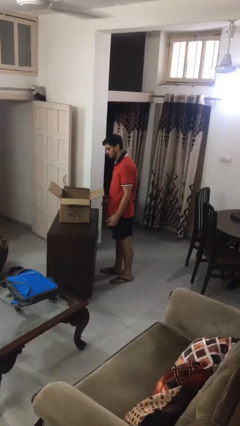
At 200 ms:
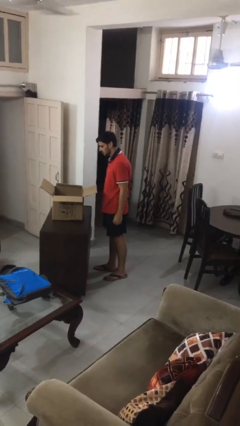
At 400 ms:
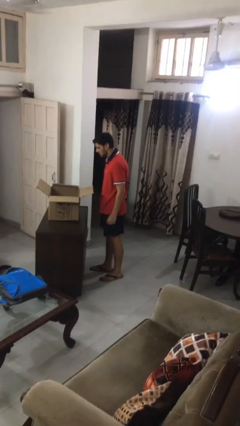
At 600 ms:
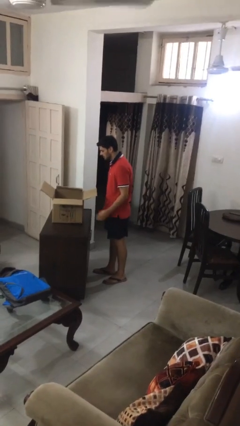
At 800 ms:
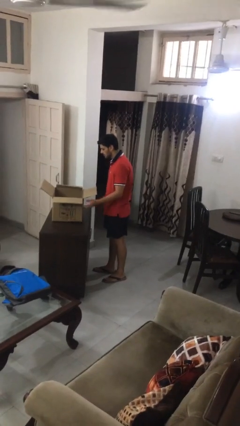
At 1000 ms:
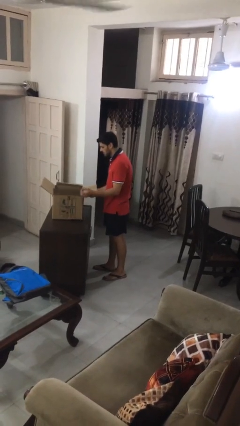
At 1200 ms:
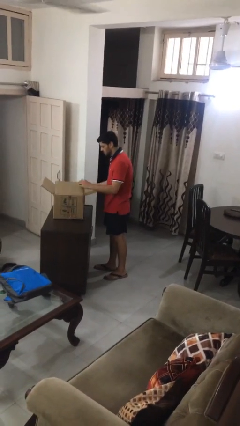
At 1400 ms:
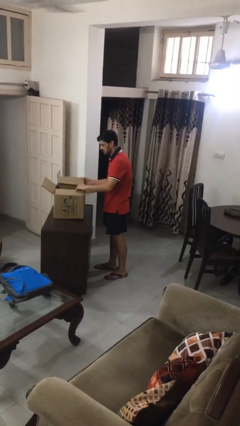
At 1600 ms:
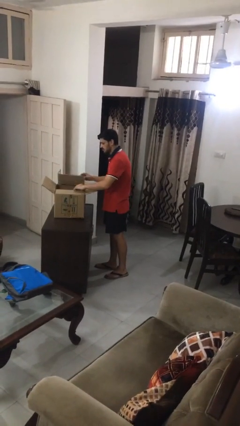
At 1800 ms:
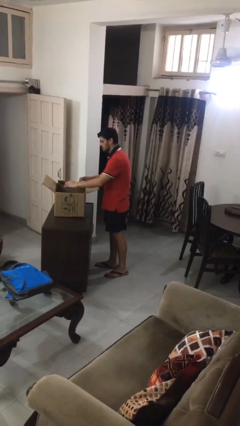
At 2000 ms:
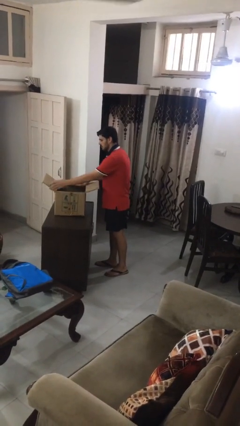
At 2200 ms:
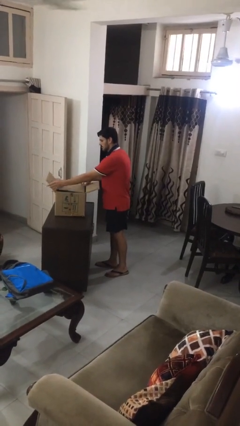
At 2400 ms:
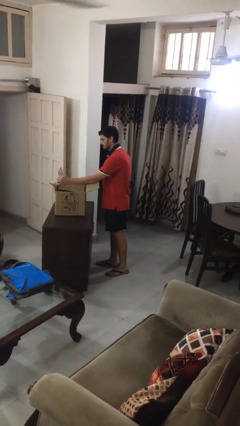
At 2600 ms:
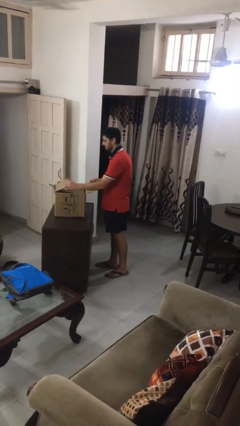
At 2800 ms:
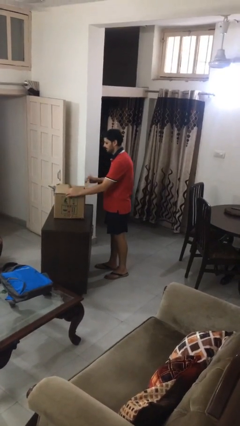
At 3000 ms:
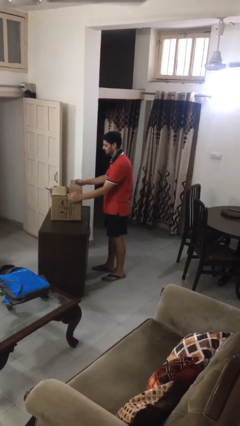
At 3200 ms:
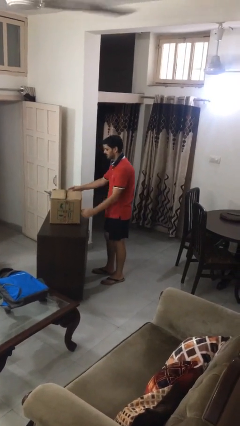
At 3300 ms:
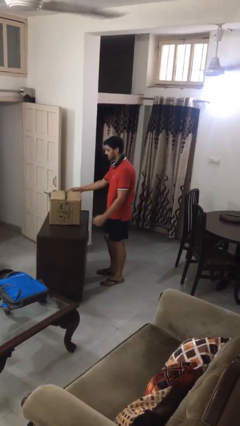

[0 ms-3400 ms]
person closes box

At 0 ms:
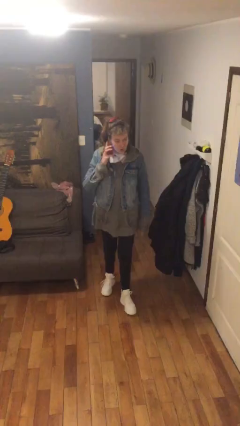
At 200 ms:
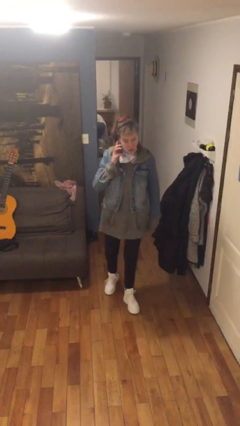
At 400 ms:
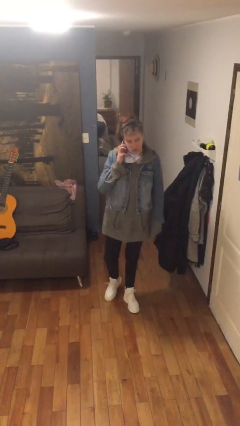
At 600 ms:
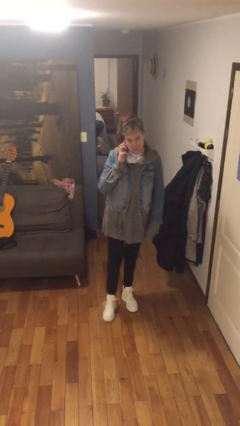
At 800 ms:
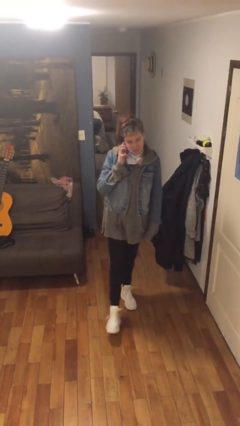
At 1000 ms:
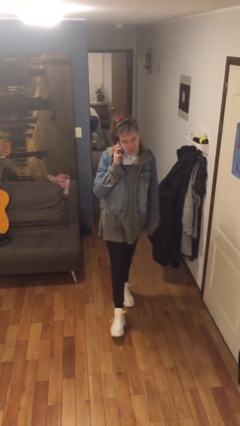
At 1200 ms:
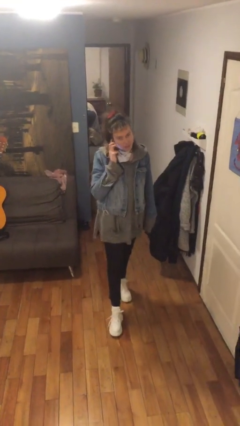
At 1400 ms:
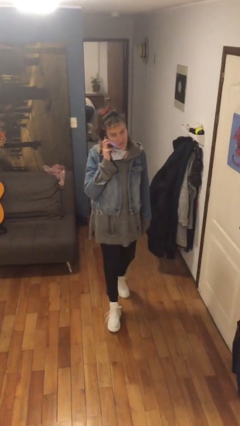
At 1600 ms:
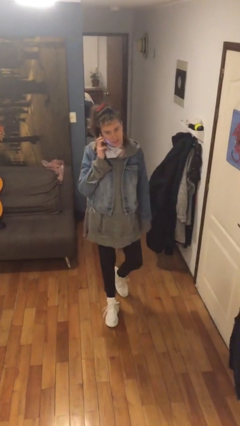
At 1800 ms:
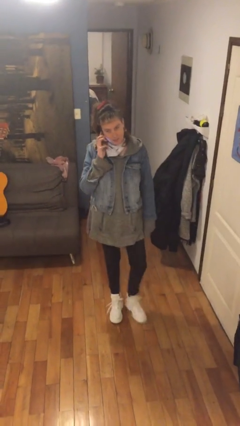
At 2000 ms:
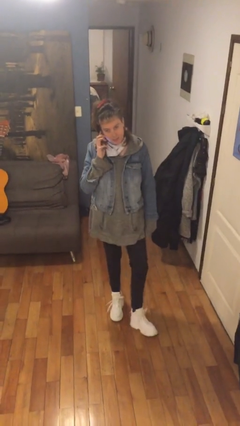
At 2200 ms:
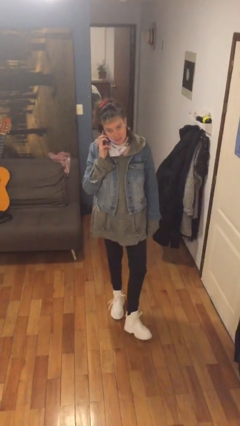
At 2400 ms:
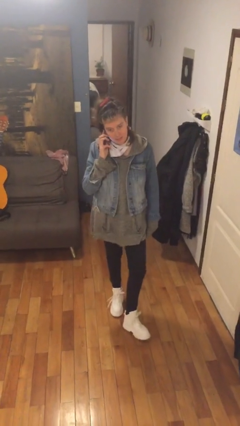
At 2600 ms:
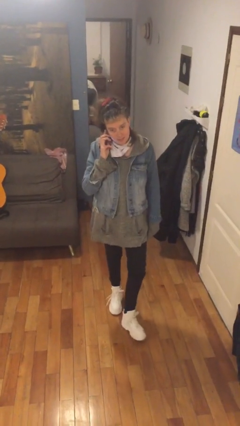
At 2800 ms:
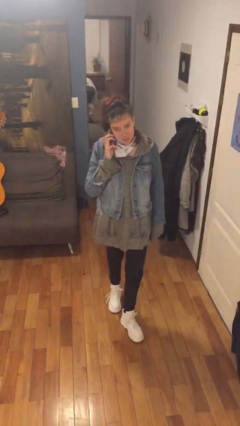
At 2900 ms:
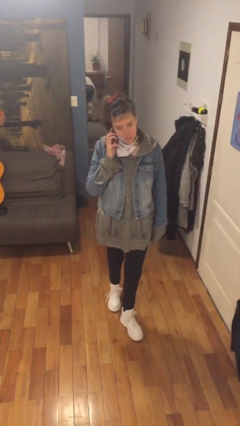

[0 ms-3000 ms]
person talks on phone

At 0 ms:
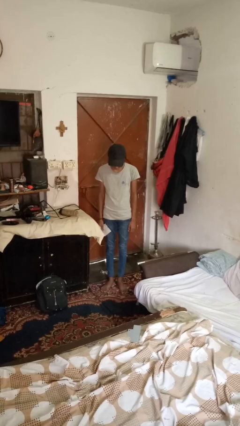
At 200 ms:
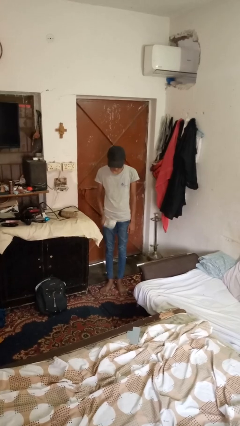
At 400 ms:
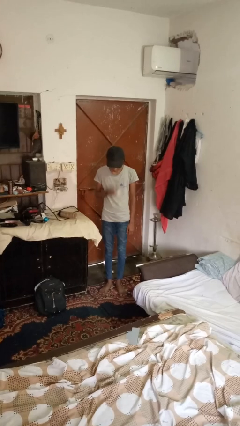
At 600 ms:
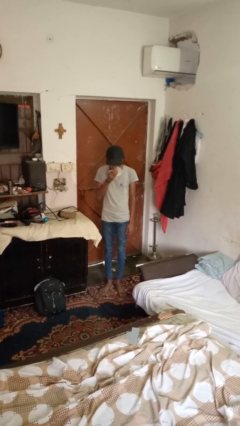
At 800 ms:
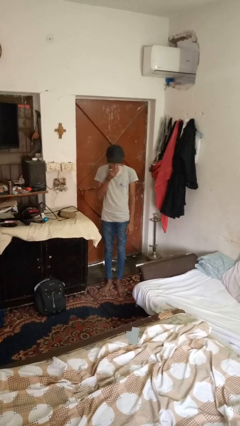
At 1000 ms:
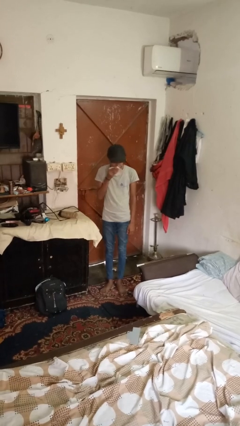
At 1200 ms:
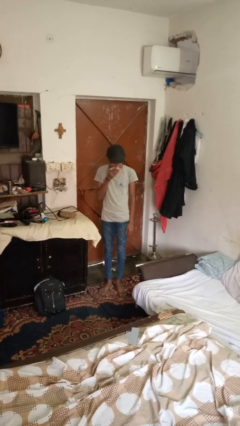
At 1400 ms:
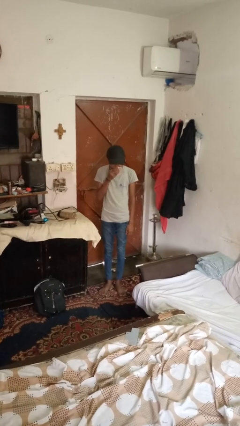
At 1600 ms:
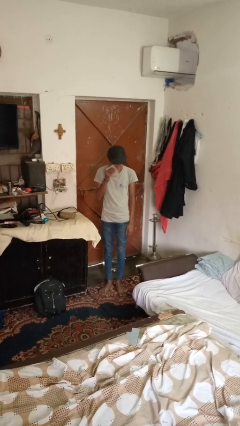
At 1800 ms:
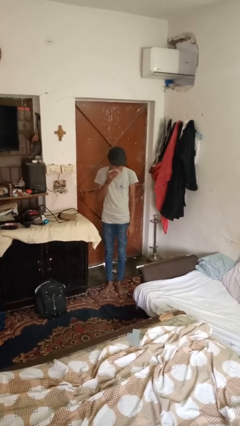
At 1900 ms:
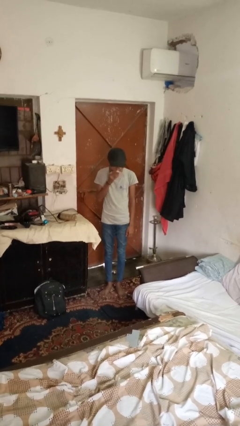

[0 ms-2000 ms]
person wipes mouth with napkin

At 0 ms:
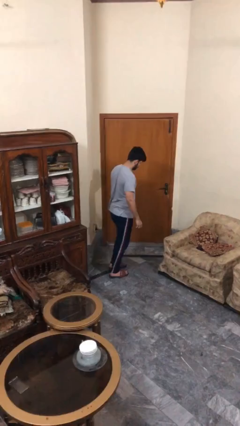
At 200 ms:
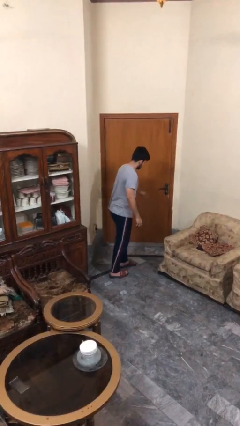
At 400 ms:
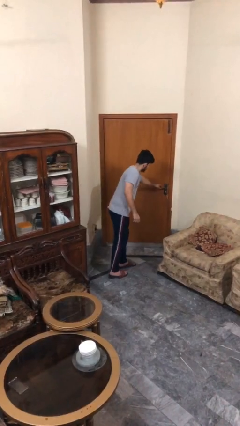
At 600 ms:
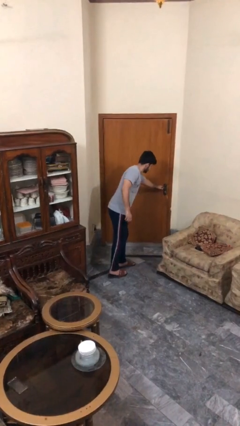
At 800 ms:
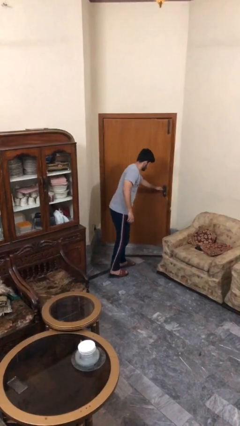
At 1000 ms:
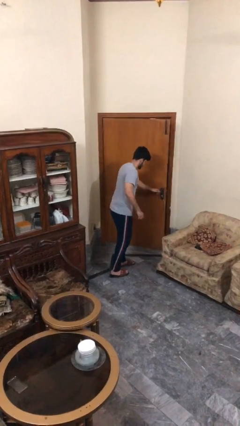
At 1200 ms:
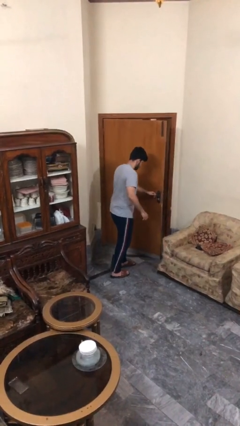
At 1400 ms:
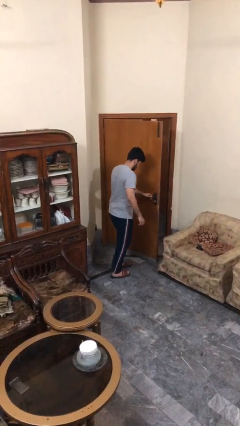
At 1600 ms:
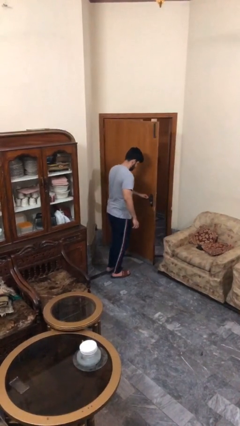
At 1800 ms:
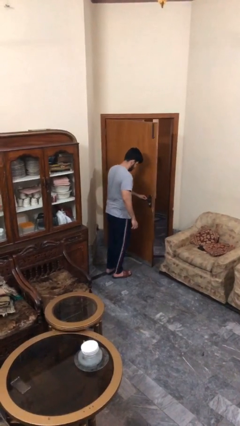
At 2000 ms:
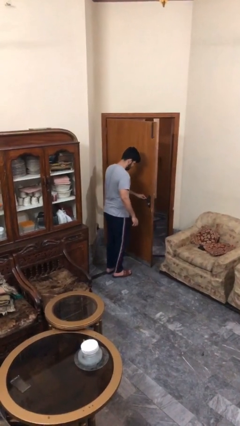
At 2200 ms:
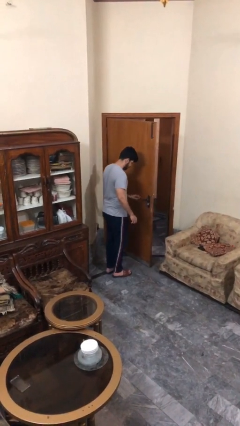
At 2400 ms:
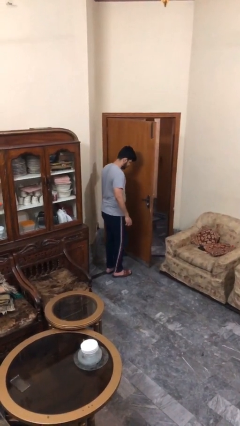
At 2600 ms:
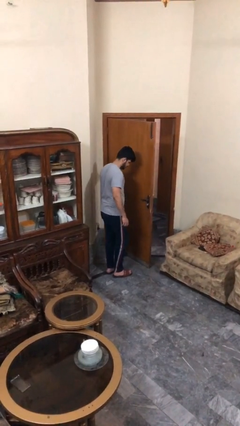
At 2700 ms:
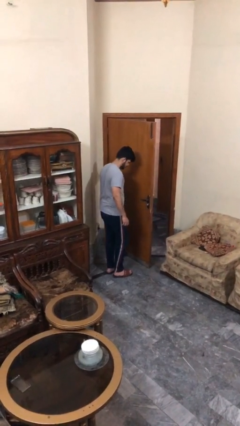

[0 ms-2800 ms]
person opens facility door

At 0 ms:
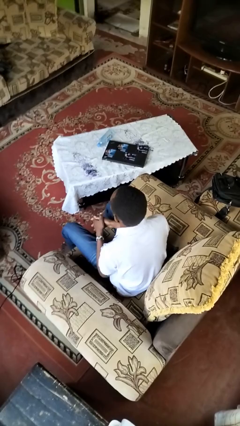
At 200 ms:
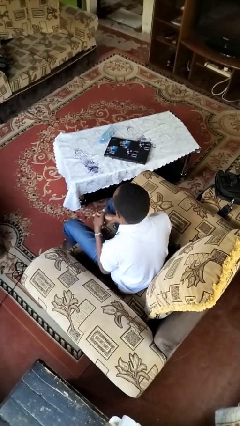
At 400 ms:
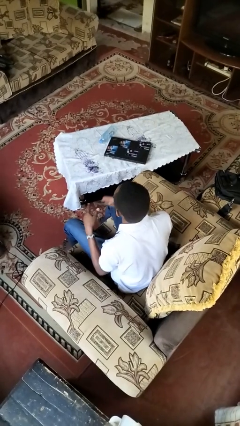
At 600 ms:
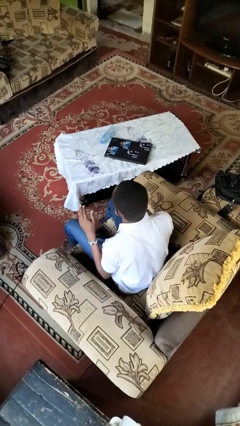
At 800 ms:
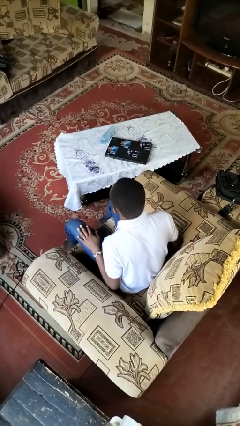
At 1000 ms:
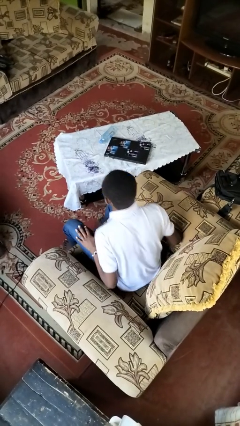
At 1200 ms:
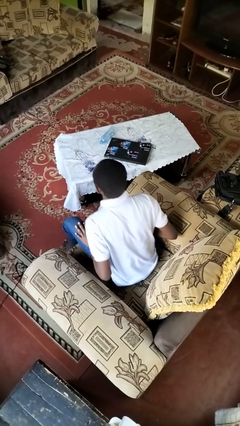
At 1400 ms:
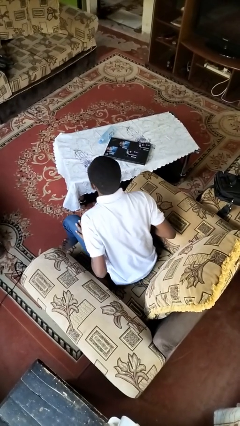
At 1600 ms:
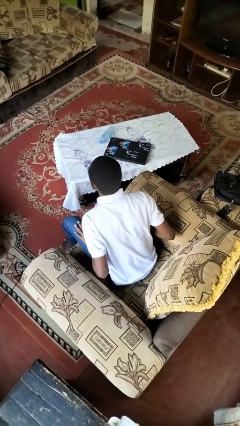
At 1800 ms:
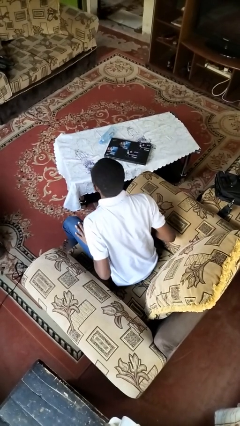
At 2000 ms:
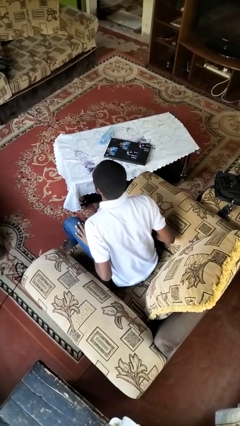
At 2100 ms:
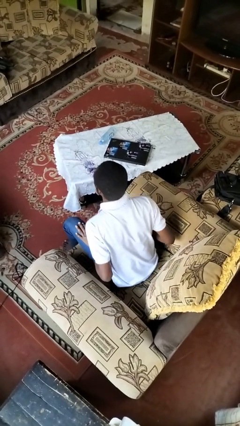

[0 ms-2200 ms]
person slaps hands on thighs

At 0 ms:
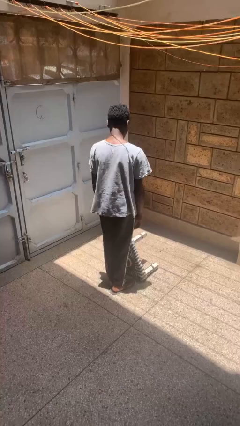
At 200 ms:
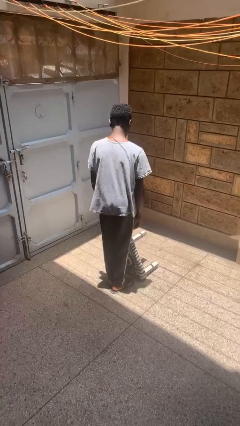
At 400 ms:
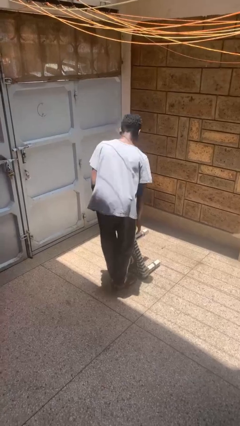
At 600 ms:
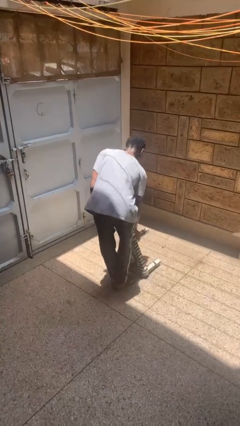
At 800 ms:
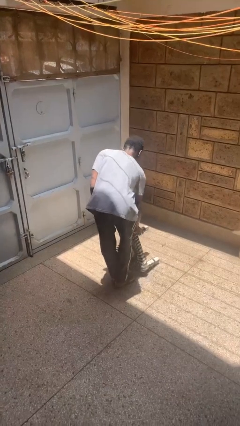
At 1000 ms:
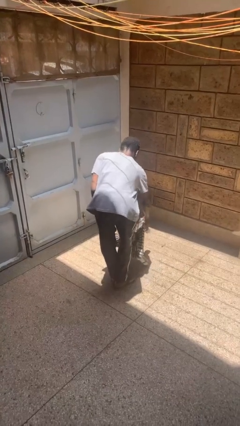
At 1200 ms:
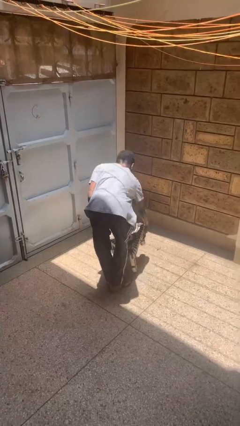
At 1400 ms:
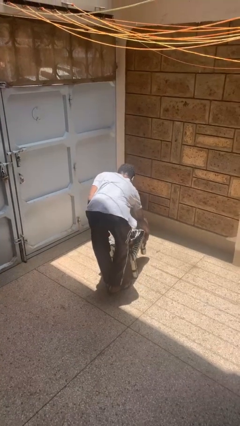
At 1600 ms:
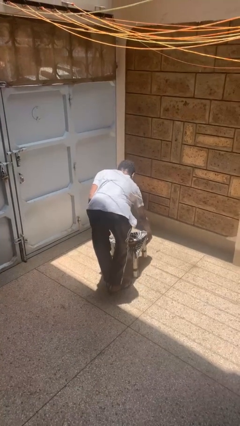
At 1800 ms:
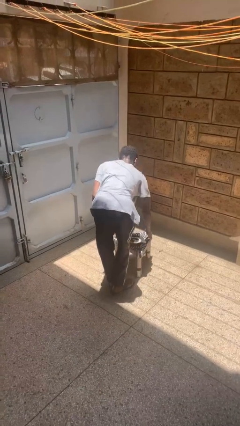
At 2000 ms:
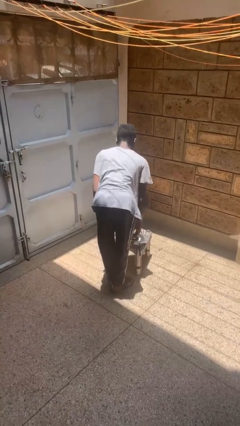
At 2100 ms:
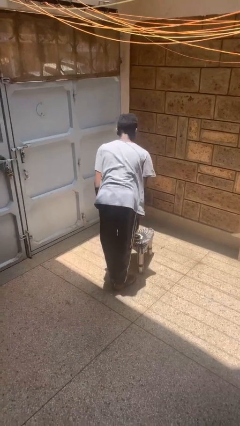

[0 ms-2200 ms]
person sets upright furniture

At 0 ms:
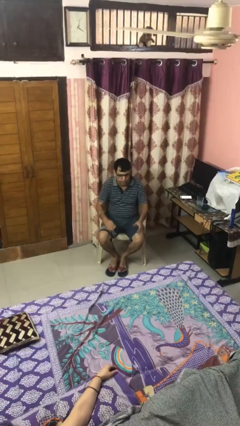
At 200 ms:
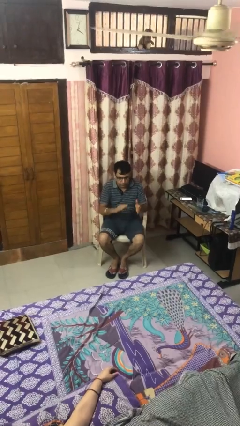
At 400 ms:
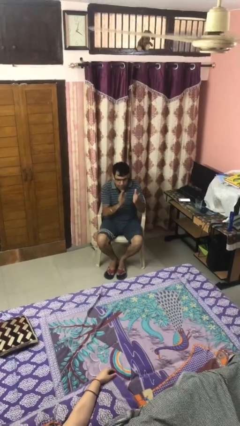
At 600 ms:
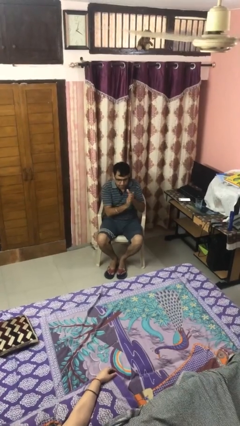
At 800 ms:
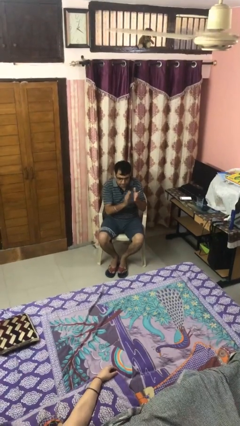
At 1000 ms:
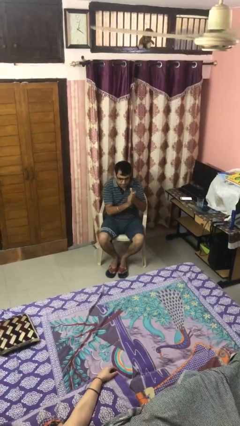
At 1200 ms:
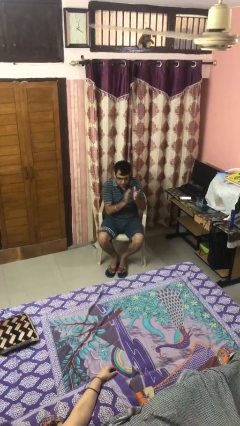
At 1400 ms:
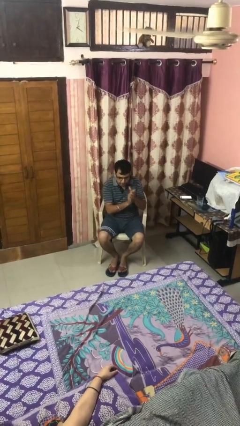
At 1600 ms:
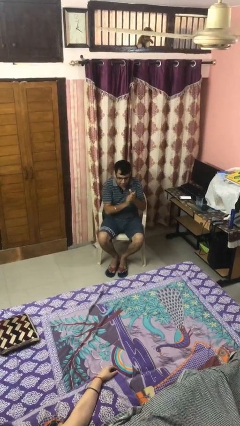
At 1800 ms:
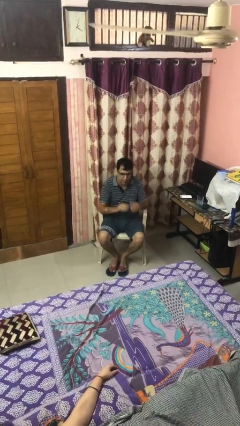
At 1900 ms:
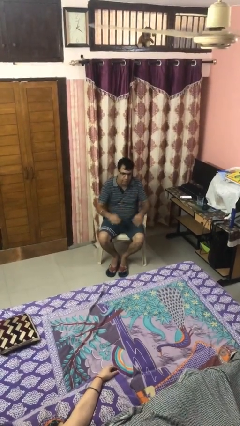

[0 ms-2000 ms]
person claps hands
